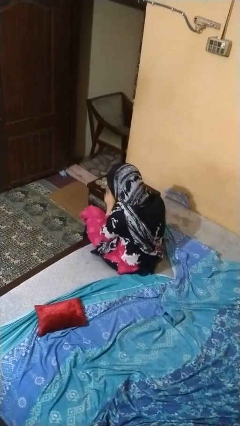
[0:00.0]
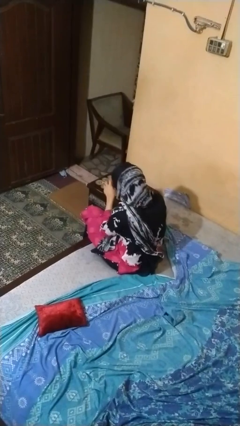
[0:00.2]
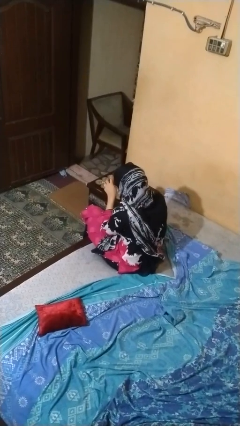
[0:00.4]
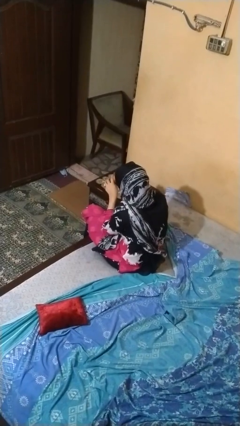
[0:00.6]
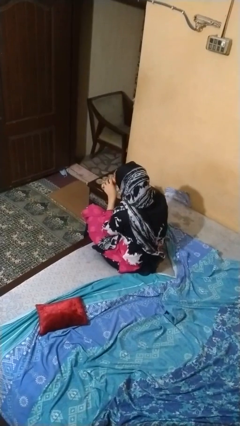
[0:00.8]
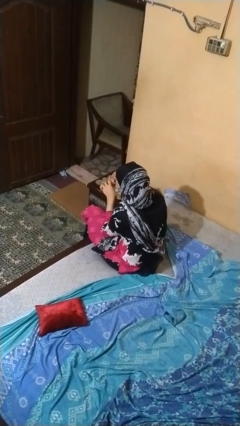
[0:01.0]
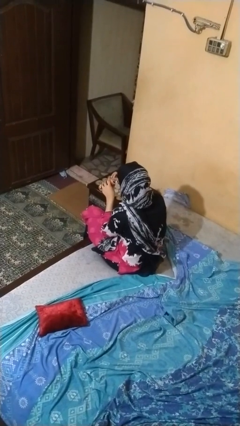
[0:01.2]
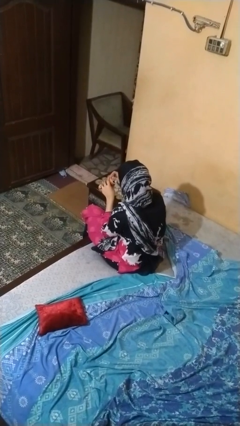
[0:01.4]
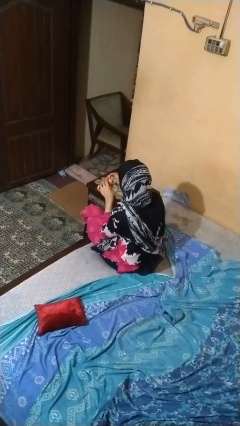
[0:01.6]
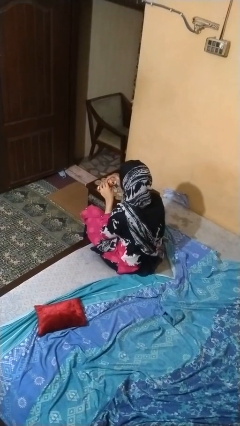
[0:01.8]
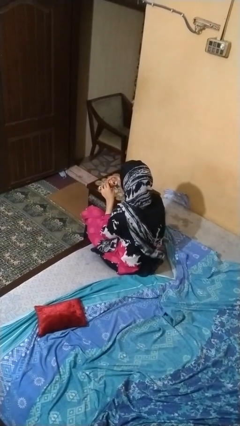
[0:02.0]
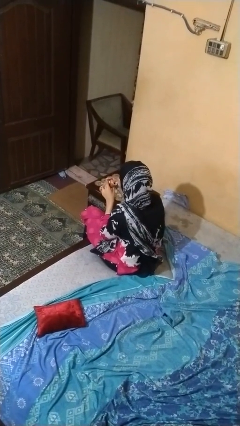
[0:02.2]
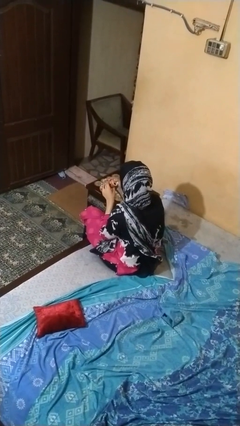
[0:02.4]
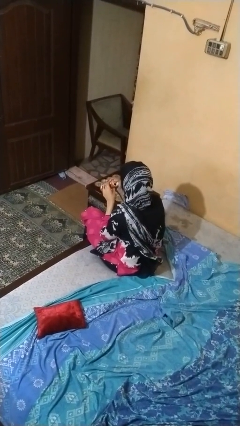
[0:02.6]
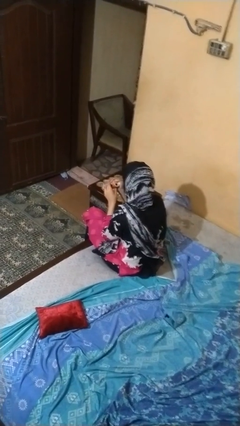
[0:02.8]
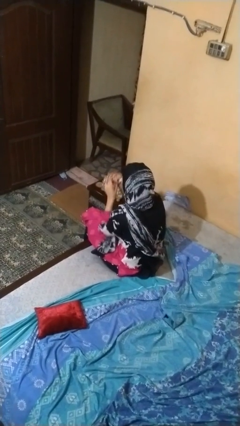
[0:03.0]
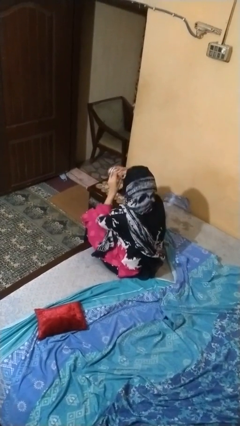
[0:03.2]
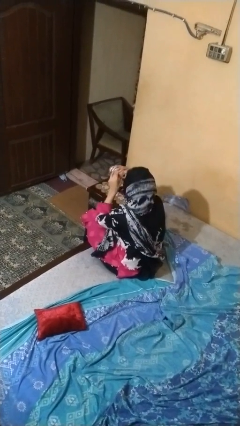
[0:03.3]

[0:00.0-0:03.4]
person opens beverage can

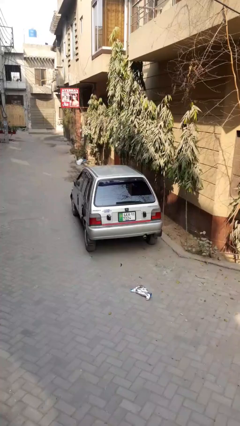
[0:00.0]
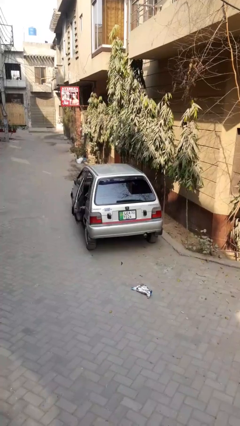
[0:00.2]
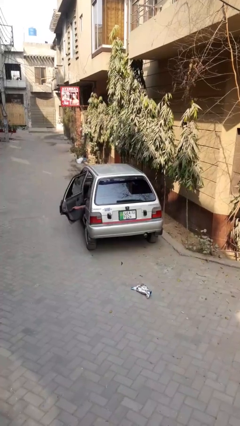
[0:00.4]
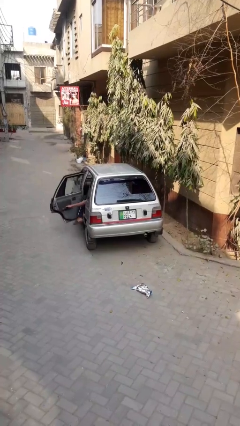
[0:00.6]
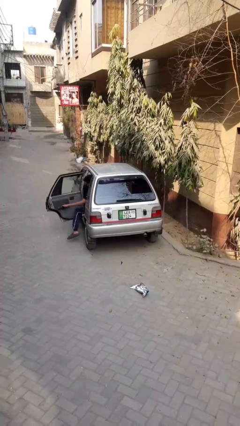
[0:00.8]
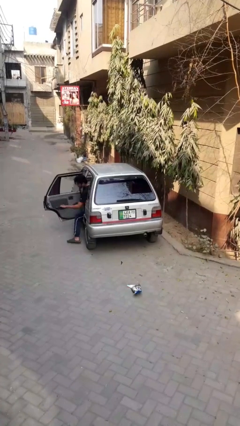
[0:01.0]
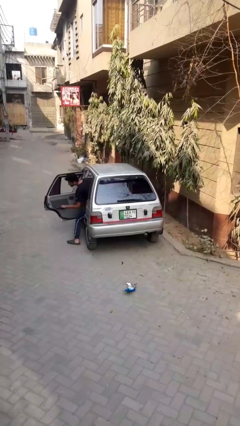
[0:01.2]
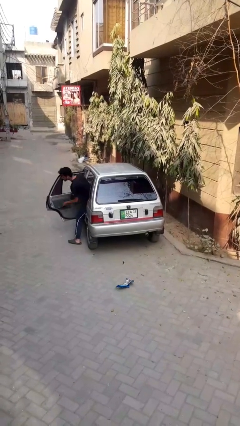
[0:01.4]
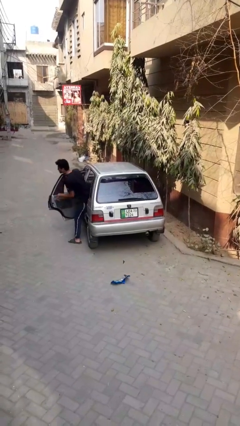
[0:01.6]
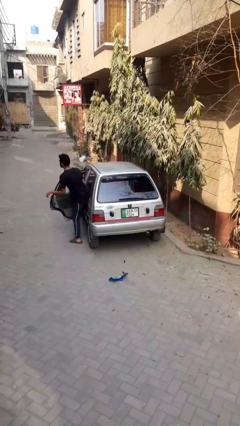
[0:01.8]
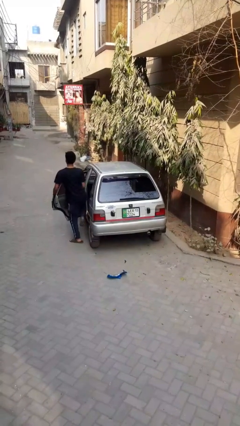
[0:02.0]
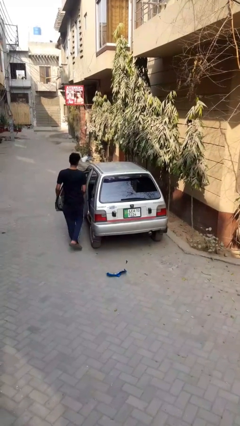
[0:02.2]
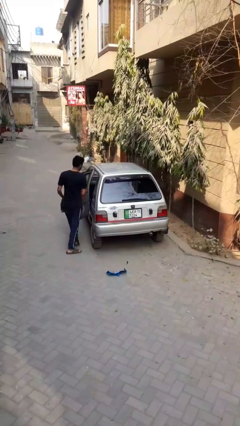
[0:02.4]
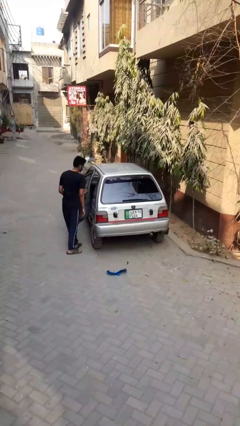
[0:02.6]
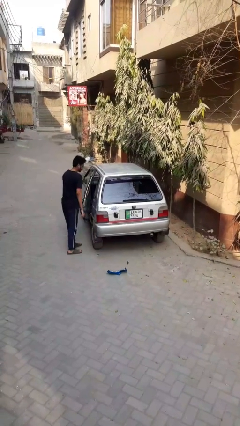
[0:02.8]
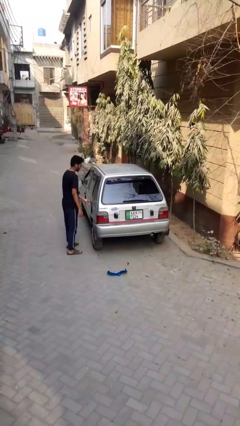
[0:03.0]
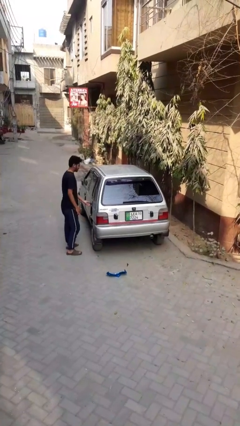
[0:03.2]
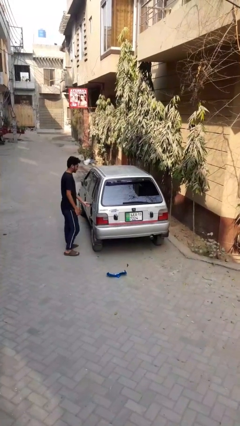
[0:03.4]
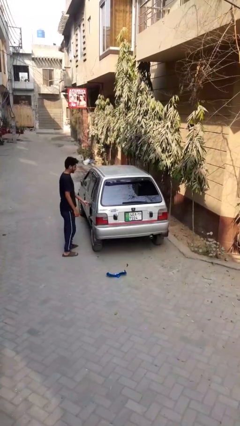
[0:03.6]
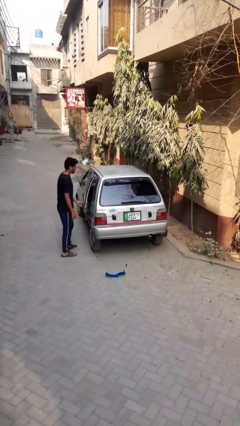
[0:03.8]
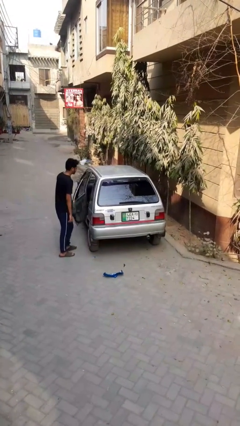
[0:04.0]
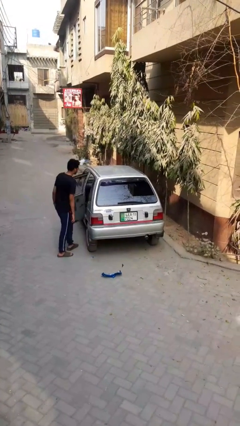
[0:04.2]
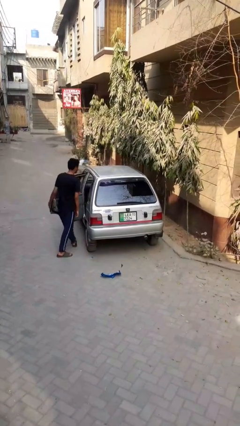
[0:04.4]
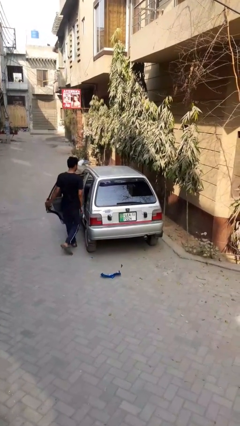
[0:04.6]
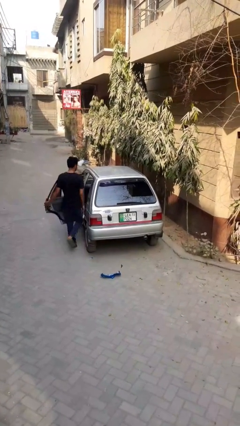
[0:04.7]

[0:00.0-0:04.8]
car drops off person

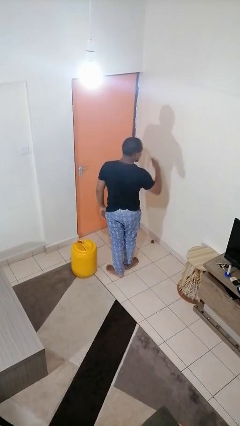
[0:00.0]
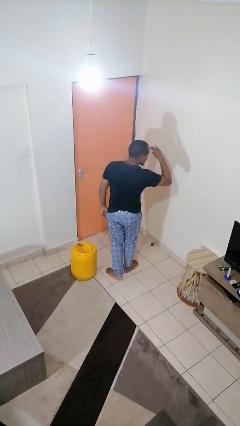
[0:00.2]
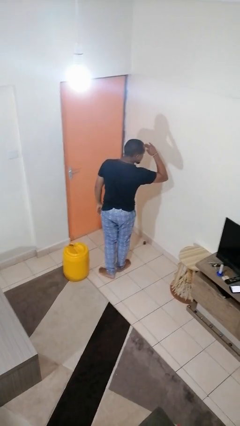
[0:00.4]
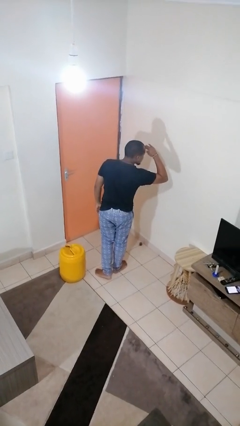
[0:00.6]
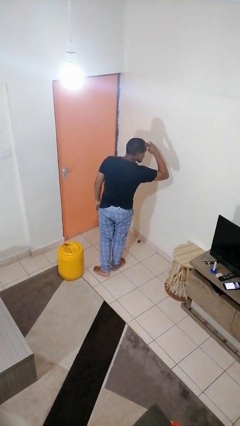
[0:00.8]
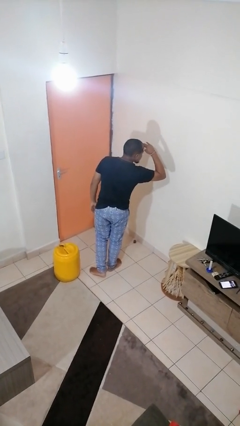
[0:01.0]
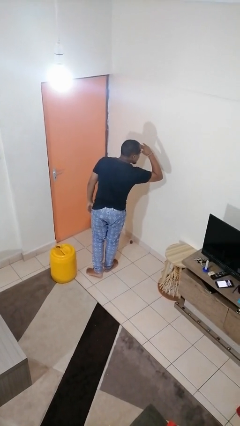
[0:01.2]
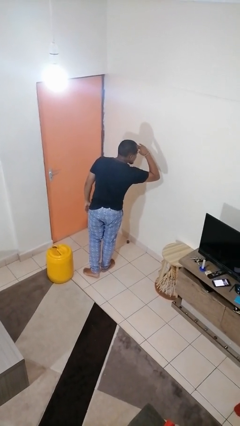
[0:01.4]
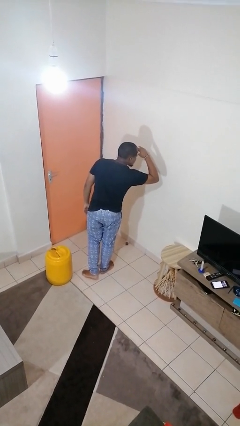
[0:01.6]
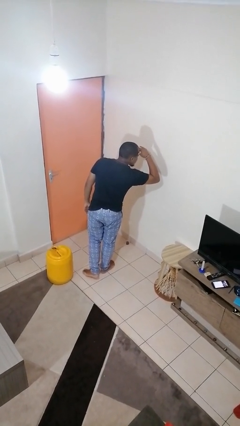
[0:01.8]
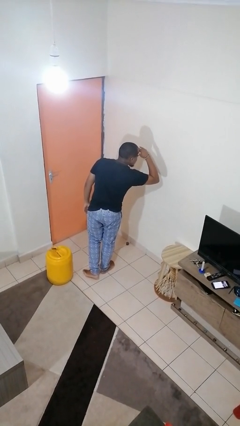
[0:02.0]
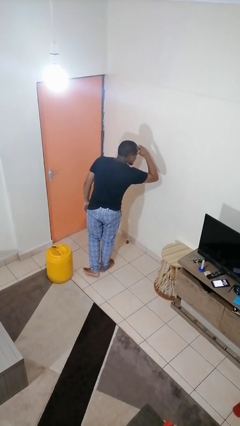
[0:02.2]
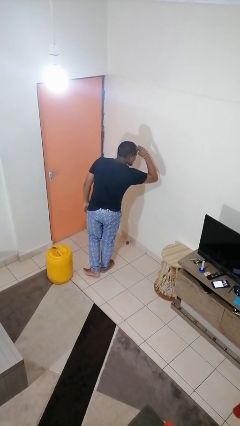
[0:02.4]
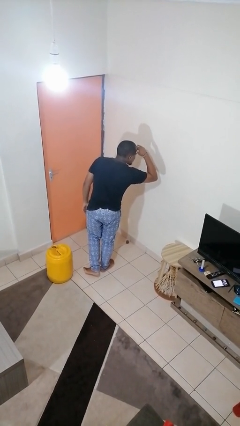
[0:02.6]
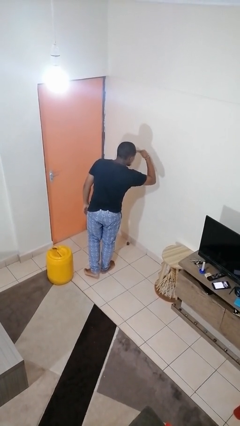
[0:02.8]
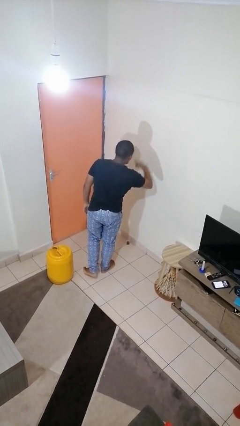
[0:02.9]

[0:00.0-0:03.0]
person shades eyes

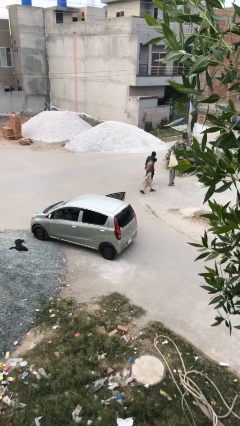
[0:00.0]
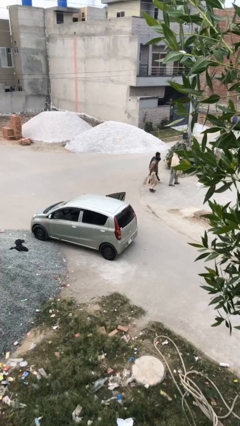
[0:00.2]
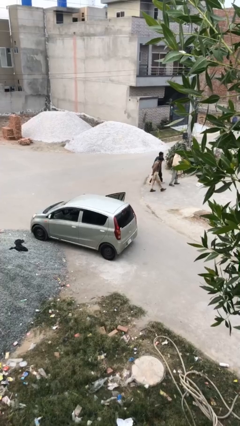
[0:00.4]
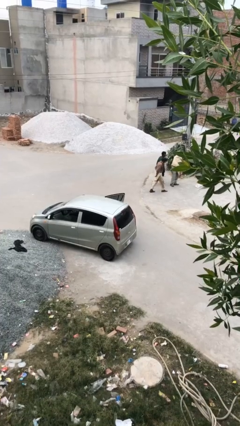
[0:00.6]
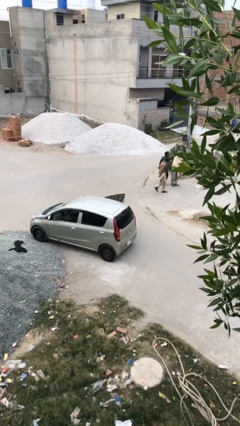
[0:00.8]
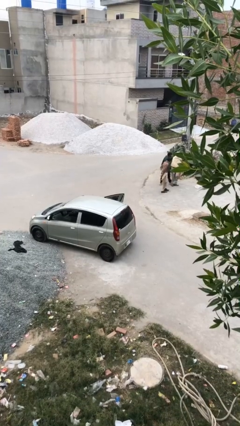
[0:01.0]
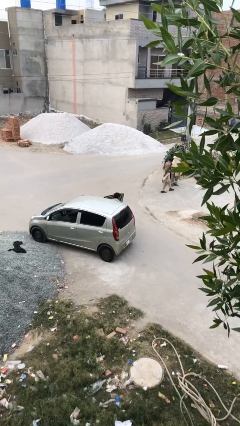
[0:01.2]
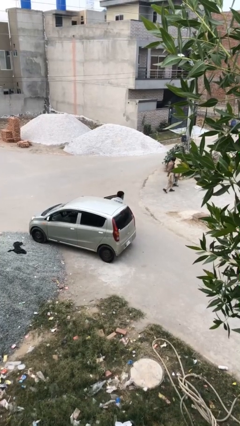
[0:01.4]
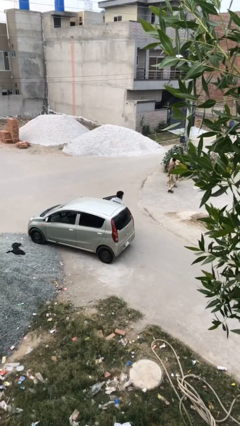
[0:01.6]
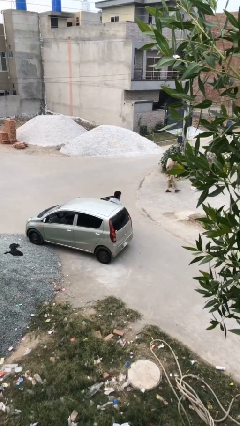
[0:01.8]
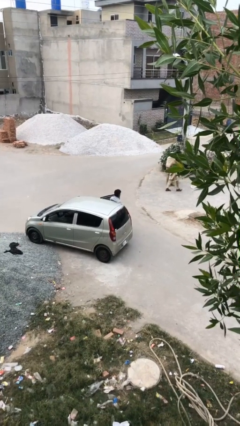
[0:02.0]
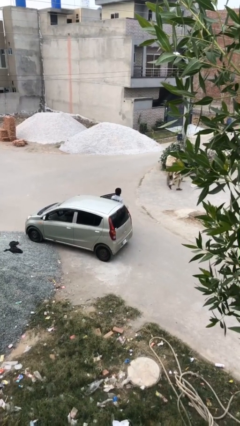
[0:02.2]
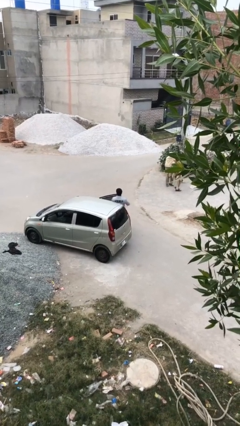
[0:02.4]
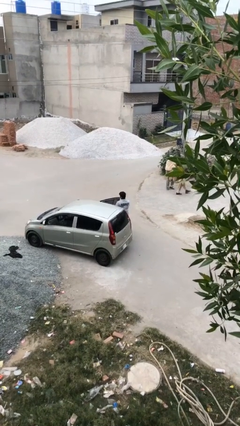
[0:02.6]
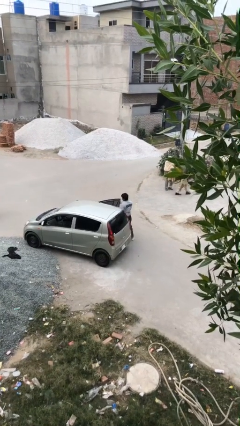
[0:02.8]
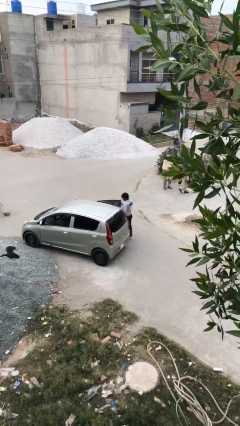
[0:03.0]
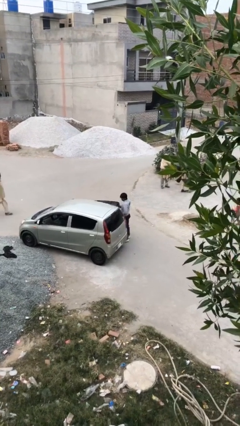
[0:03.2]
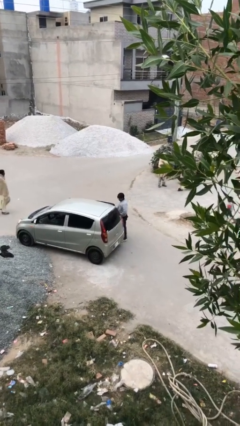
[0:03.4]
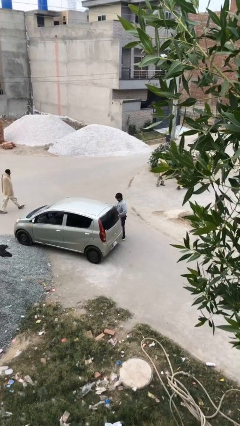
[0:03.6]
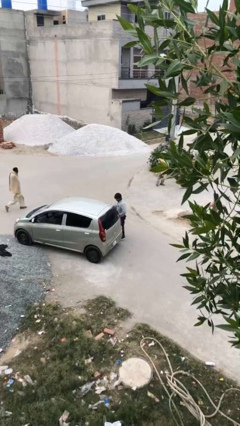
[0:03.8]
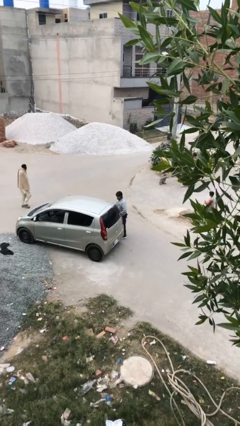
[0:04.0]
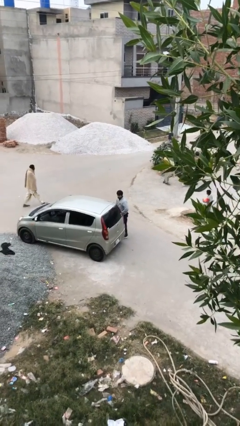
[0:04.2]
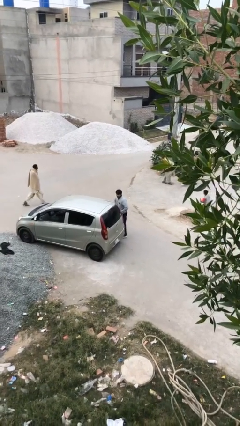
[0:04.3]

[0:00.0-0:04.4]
person exits car

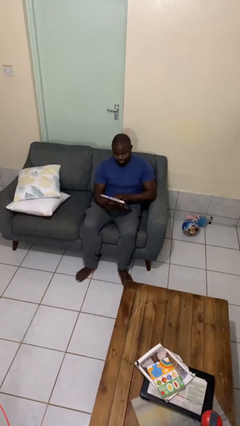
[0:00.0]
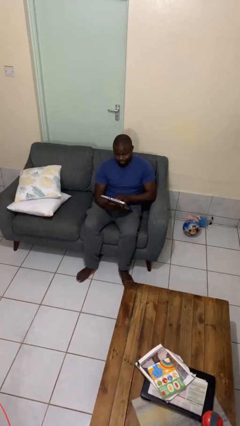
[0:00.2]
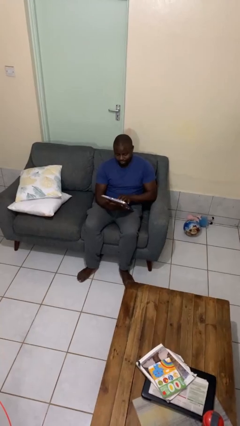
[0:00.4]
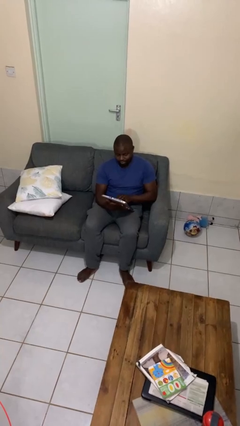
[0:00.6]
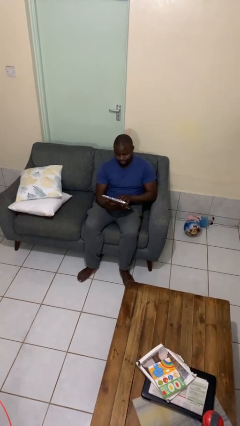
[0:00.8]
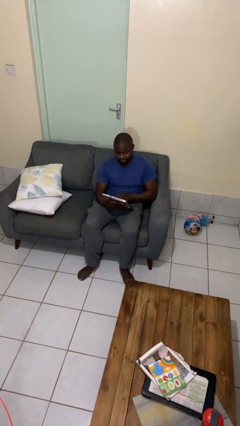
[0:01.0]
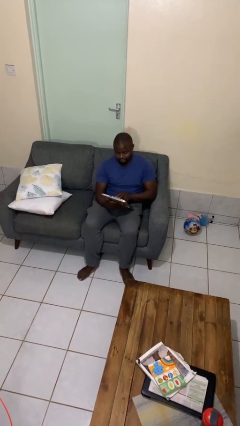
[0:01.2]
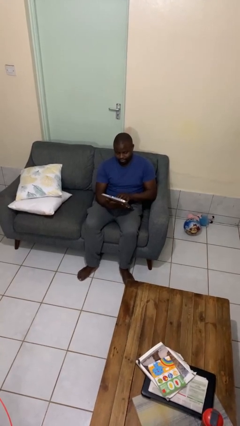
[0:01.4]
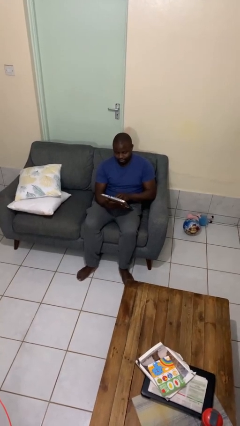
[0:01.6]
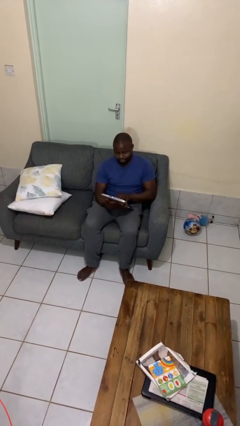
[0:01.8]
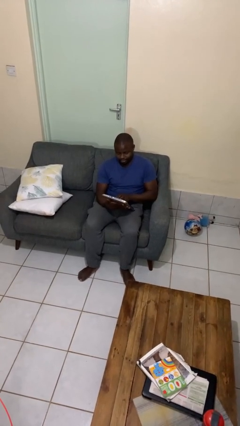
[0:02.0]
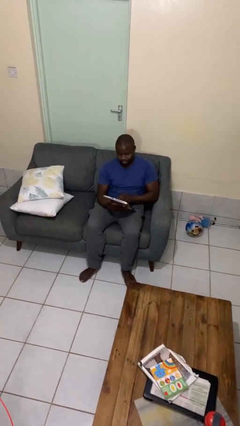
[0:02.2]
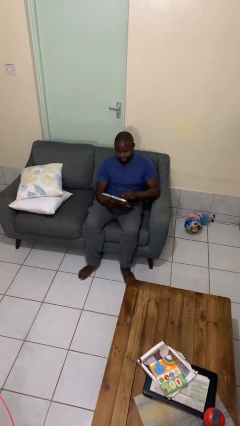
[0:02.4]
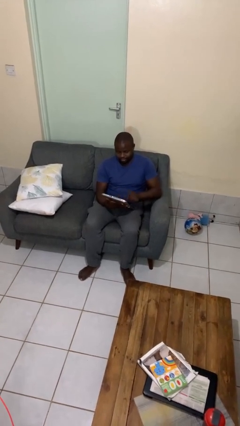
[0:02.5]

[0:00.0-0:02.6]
person interacts with tablet
